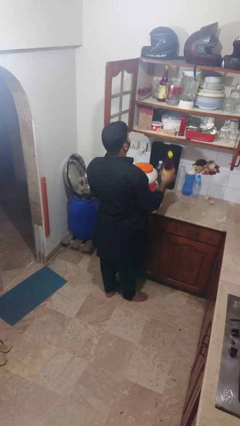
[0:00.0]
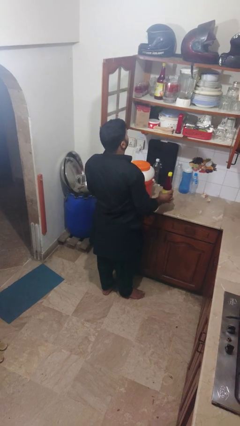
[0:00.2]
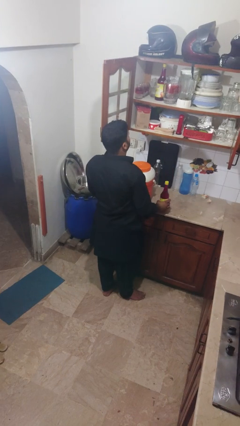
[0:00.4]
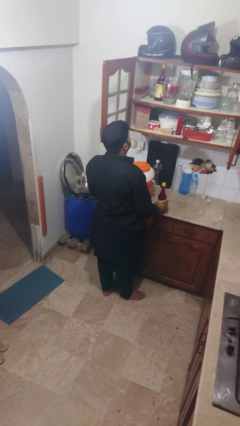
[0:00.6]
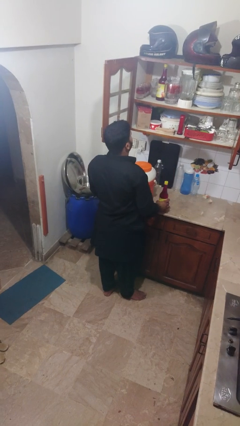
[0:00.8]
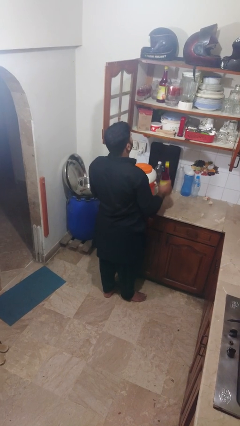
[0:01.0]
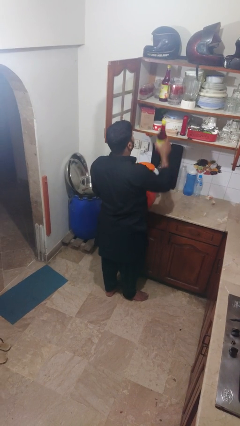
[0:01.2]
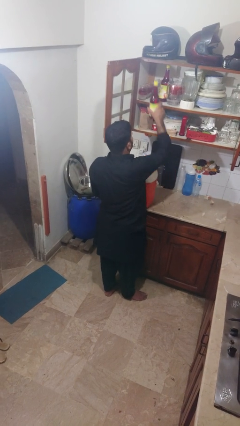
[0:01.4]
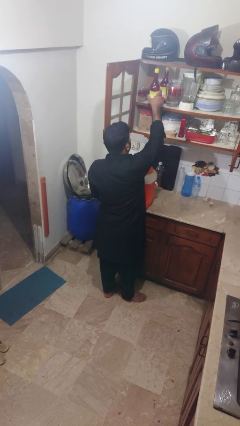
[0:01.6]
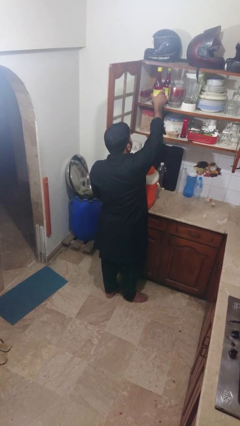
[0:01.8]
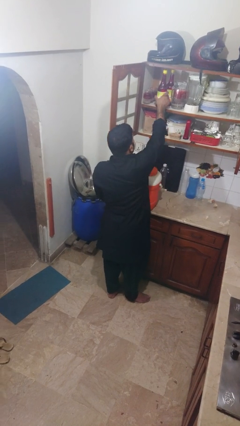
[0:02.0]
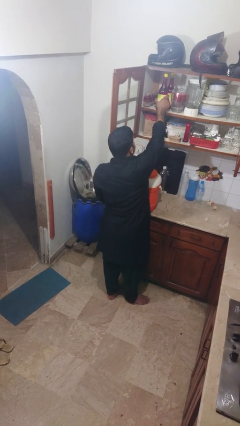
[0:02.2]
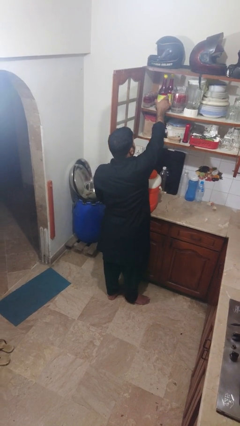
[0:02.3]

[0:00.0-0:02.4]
person puts down object into cabinet

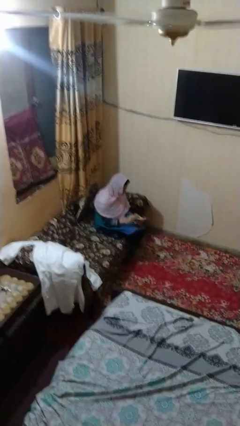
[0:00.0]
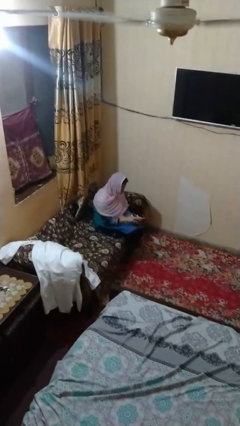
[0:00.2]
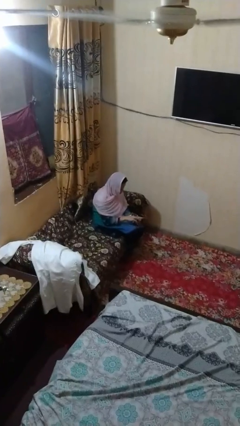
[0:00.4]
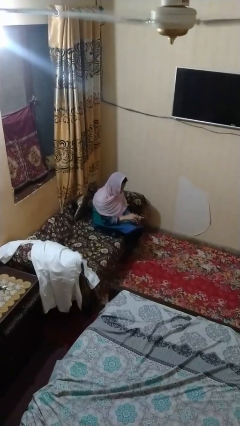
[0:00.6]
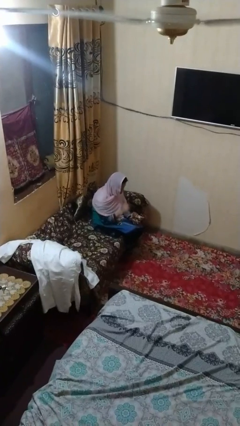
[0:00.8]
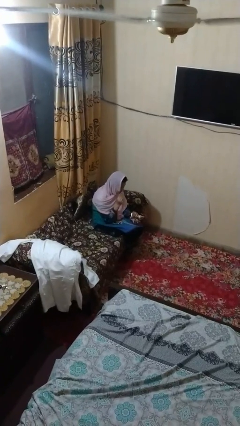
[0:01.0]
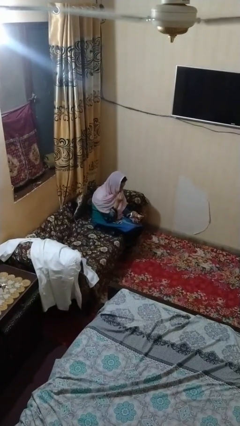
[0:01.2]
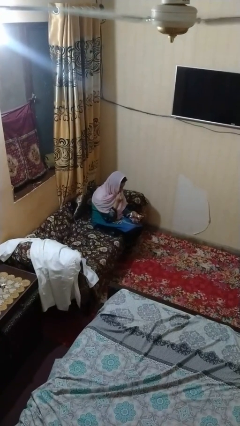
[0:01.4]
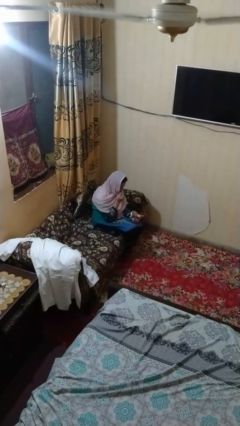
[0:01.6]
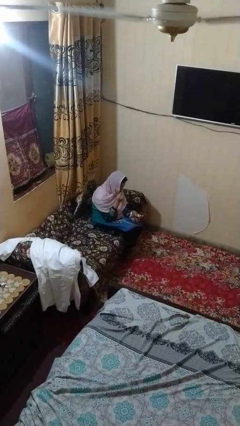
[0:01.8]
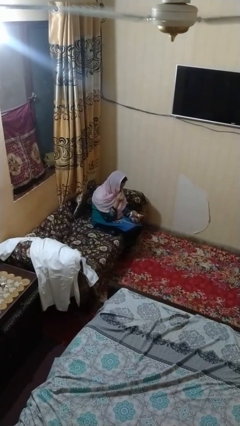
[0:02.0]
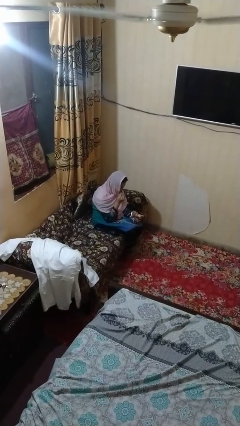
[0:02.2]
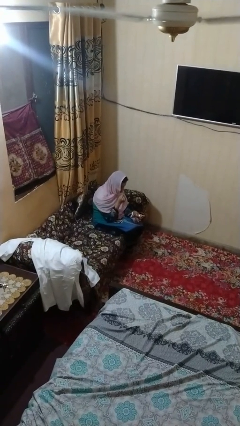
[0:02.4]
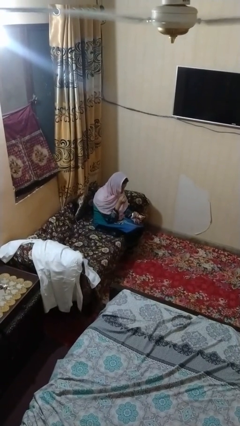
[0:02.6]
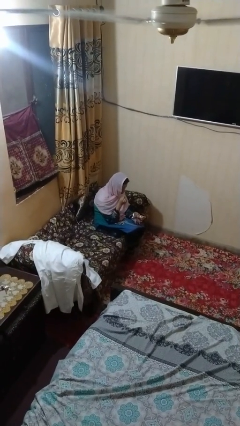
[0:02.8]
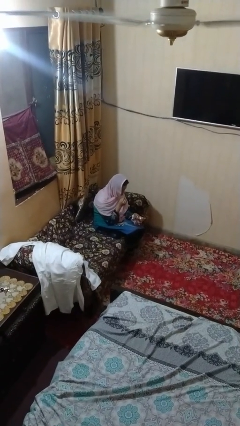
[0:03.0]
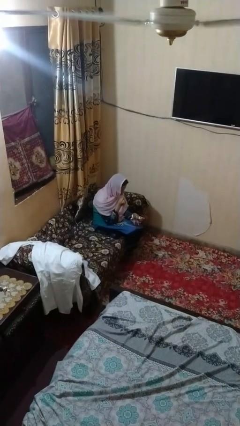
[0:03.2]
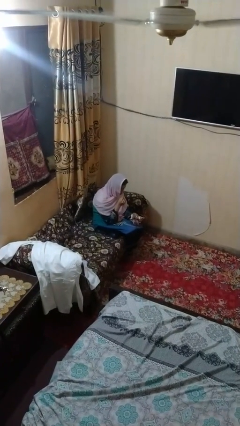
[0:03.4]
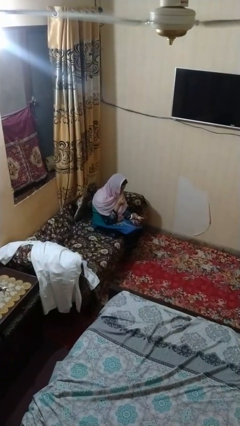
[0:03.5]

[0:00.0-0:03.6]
person eats snack from bag

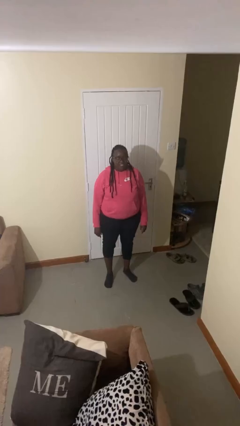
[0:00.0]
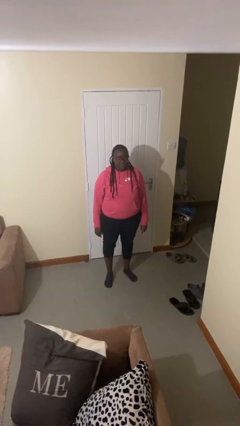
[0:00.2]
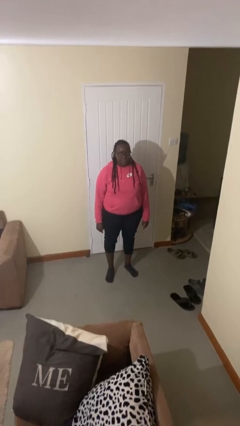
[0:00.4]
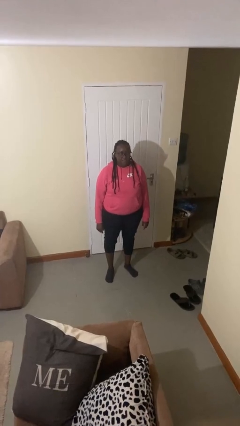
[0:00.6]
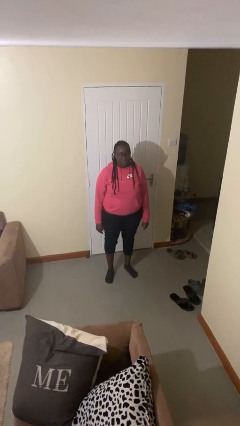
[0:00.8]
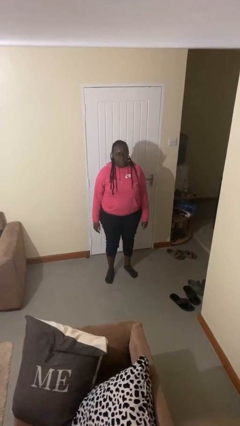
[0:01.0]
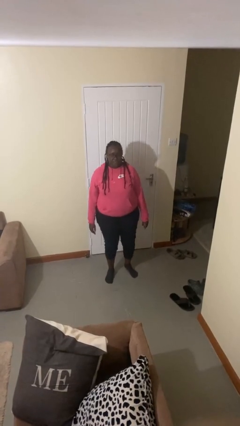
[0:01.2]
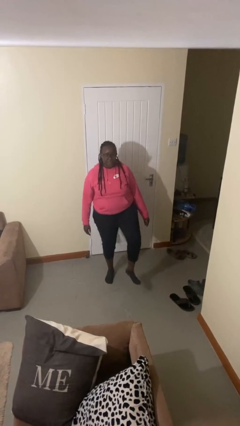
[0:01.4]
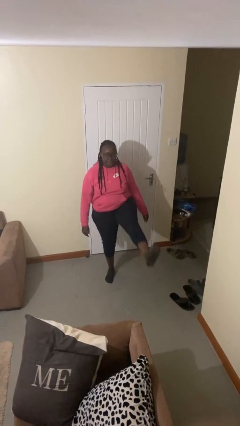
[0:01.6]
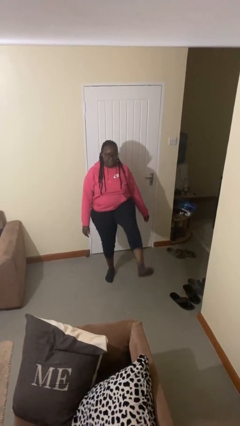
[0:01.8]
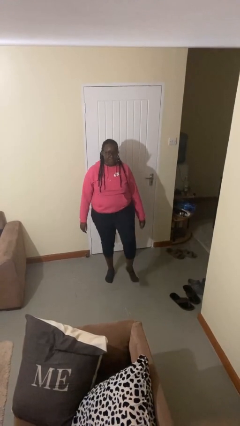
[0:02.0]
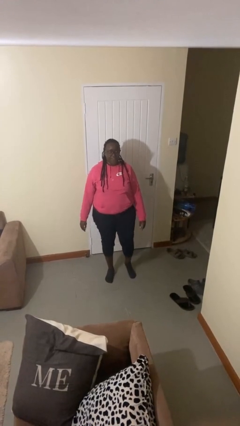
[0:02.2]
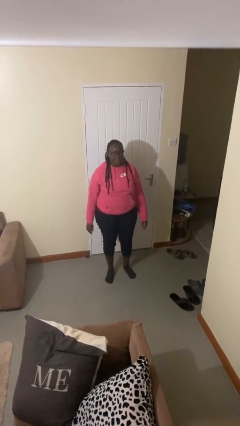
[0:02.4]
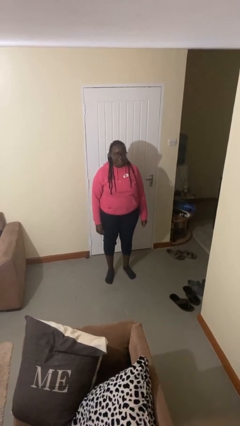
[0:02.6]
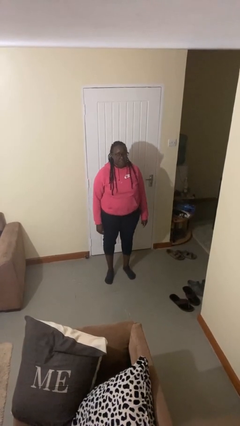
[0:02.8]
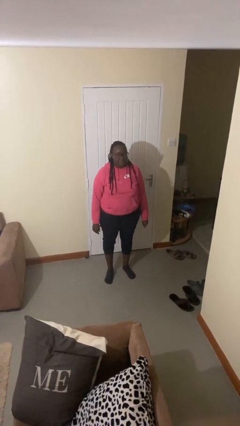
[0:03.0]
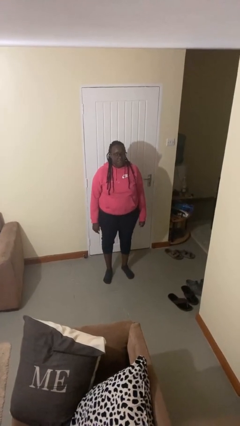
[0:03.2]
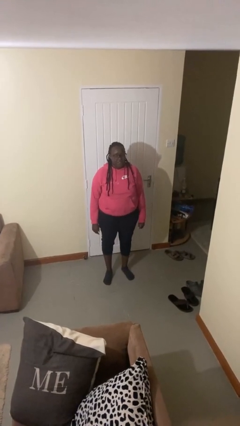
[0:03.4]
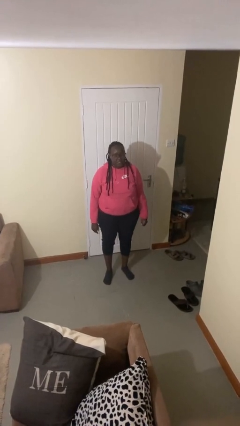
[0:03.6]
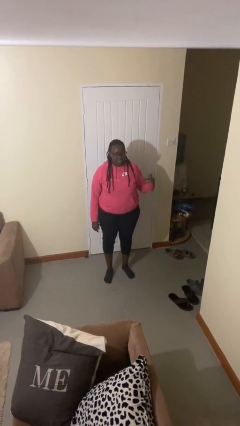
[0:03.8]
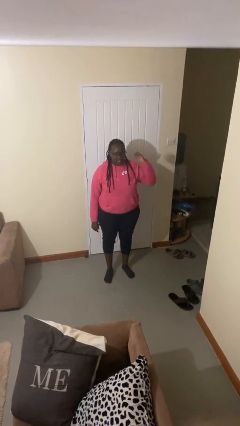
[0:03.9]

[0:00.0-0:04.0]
person karate kicks

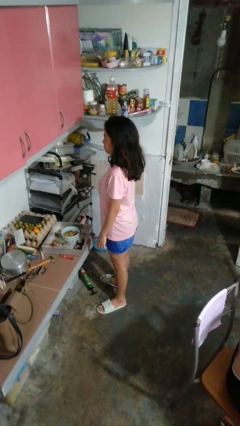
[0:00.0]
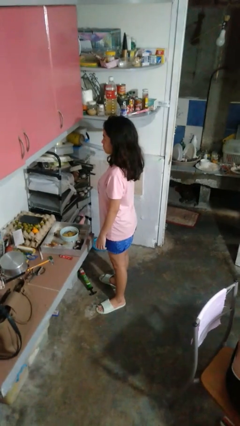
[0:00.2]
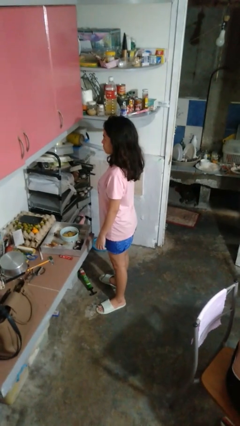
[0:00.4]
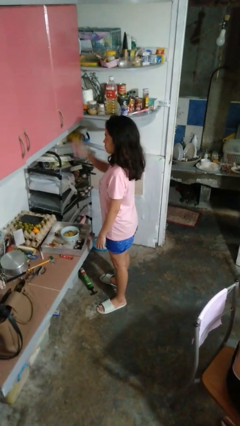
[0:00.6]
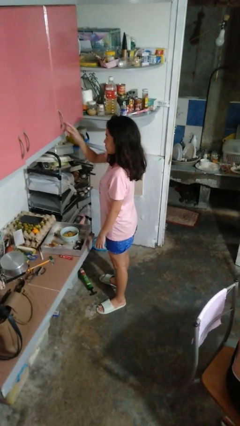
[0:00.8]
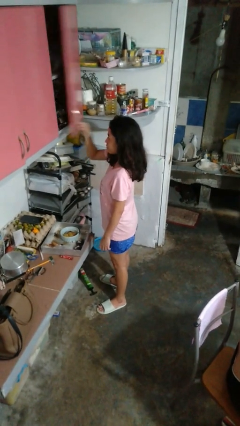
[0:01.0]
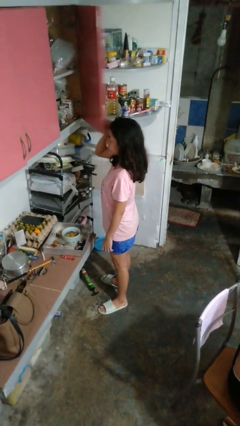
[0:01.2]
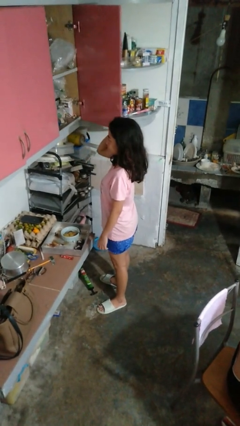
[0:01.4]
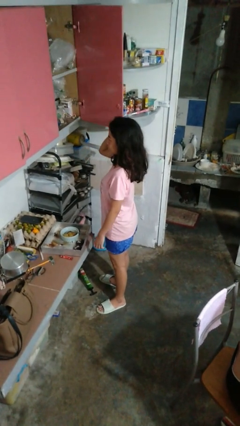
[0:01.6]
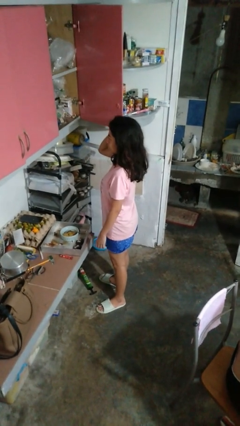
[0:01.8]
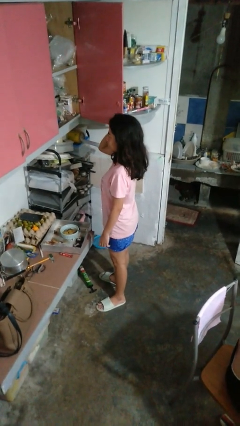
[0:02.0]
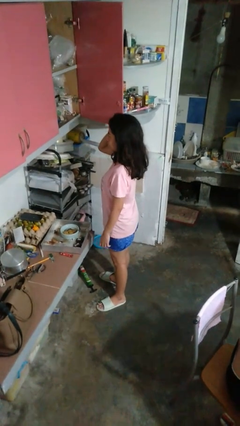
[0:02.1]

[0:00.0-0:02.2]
person opens cabinet

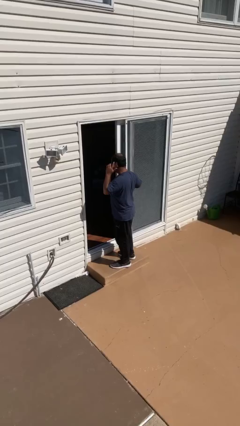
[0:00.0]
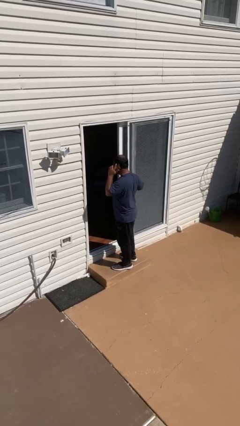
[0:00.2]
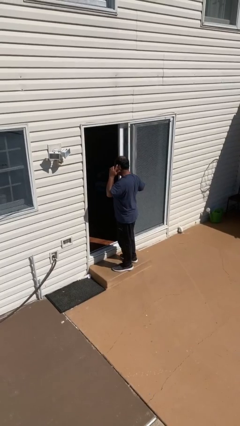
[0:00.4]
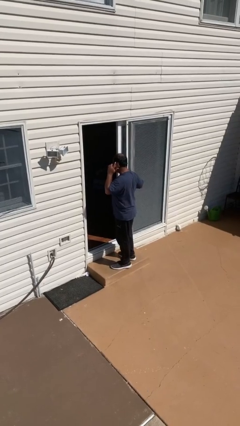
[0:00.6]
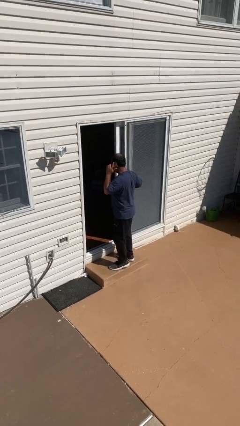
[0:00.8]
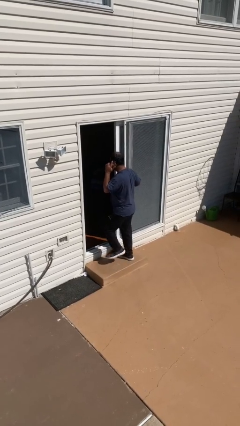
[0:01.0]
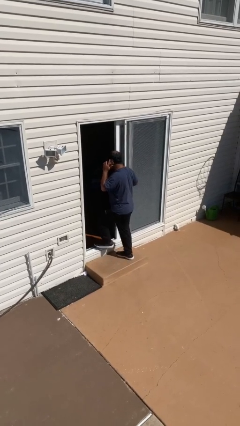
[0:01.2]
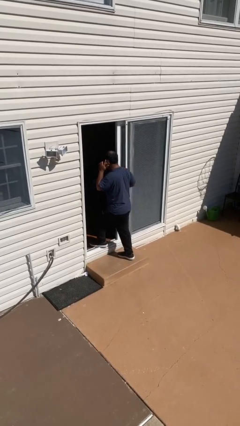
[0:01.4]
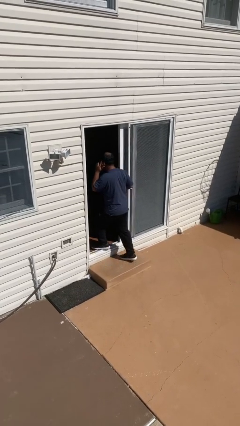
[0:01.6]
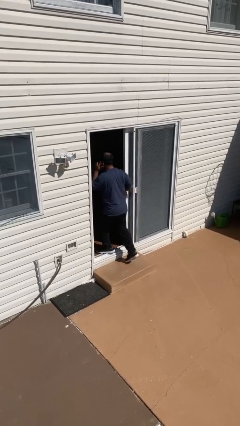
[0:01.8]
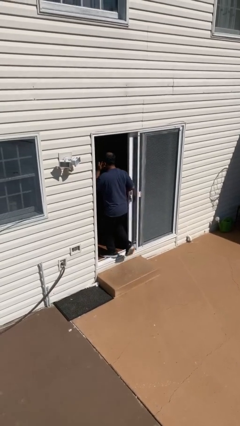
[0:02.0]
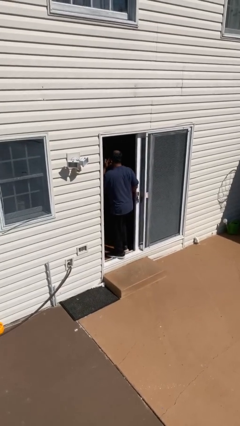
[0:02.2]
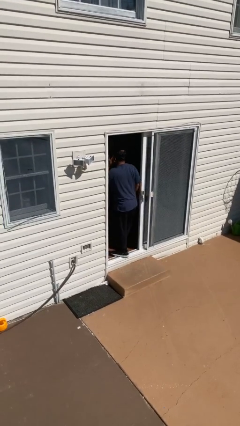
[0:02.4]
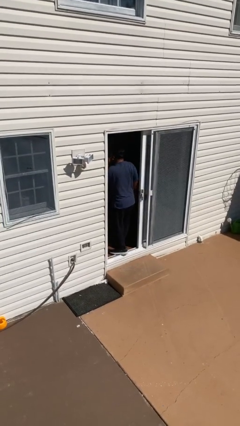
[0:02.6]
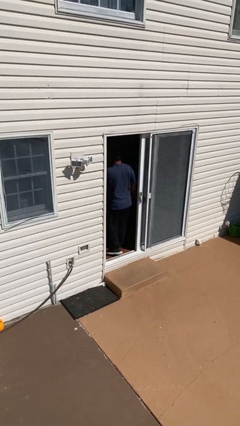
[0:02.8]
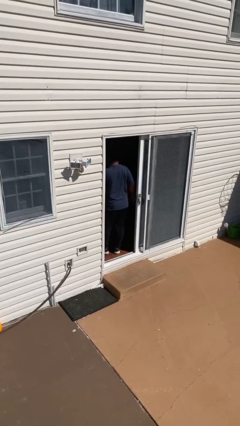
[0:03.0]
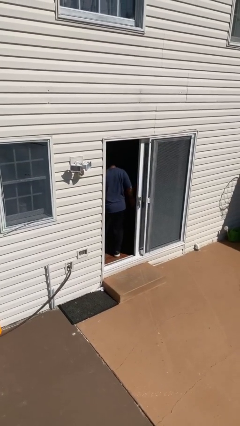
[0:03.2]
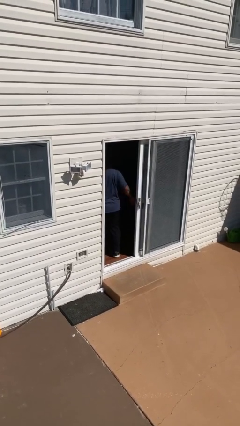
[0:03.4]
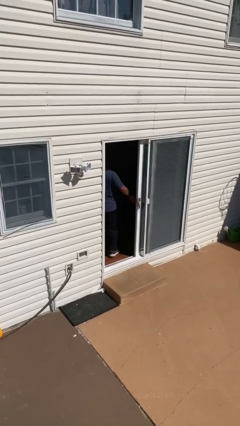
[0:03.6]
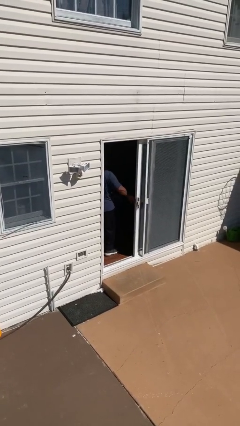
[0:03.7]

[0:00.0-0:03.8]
person exits scene through structure

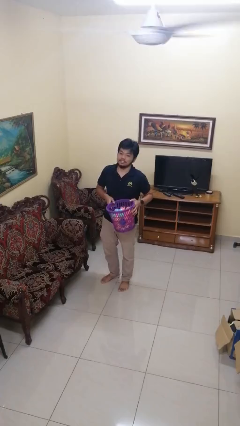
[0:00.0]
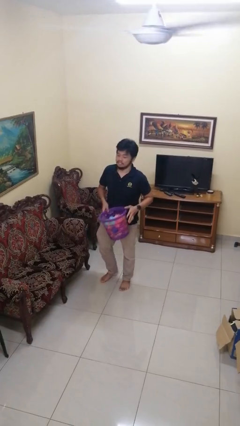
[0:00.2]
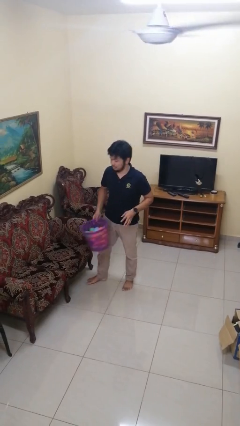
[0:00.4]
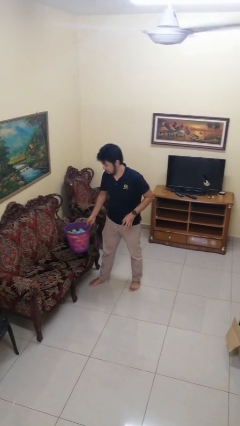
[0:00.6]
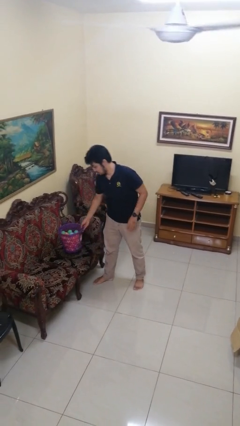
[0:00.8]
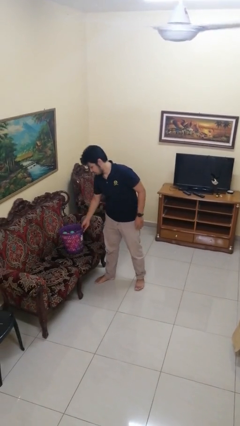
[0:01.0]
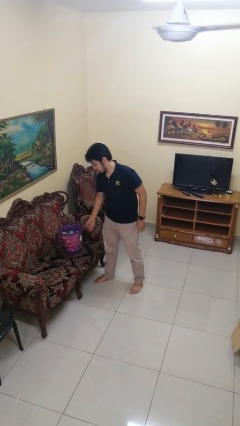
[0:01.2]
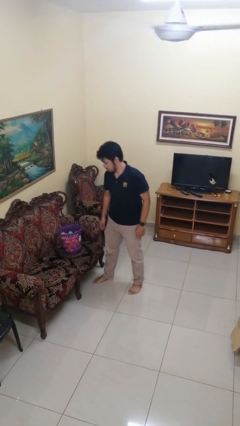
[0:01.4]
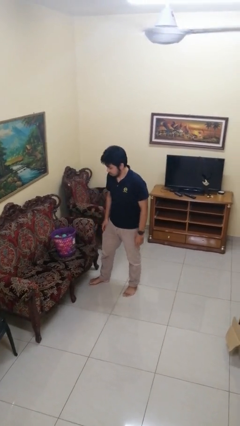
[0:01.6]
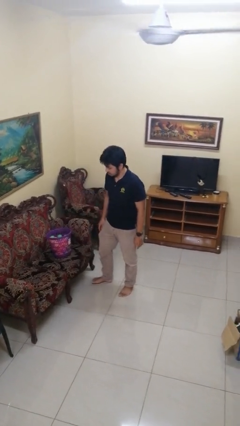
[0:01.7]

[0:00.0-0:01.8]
person puts down object on couch
